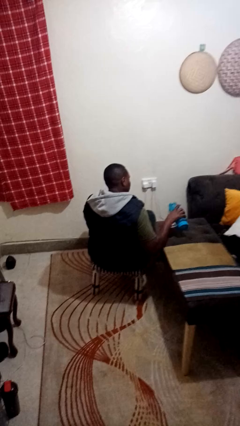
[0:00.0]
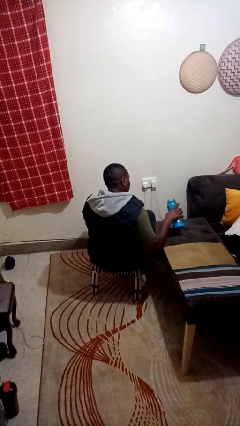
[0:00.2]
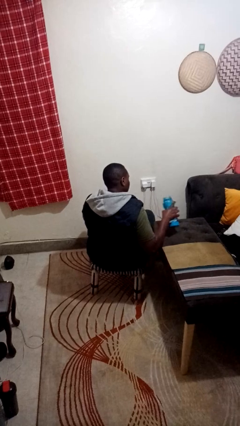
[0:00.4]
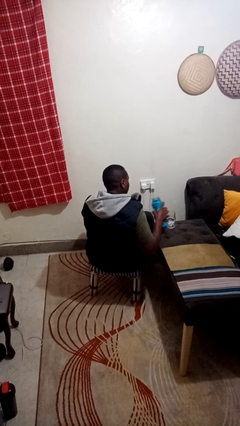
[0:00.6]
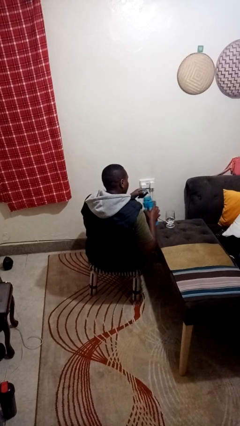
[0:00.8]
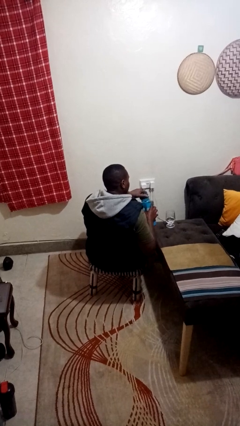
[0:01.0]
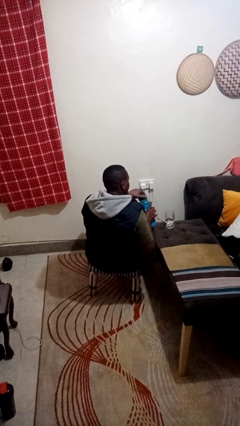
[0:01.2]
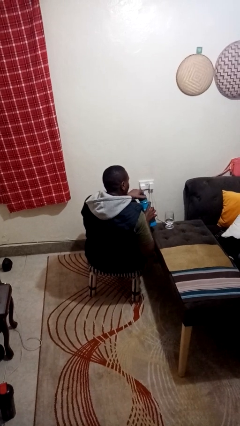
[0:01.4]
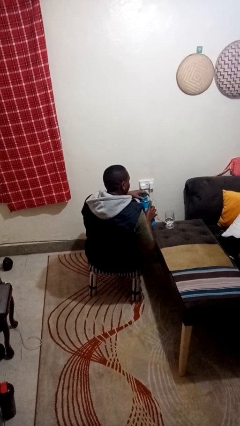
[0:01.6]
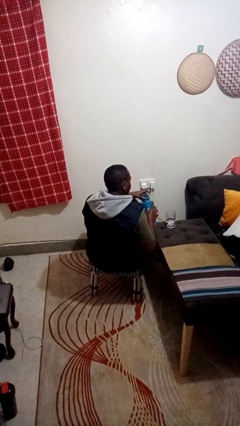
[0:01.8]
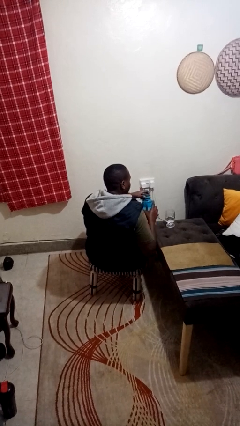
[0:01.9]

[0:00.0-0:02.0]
person screws lid to bottle

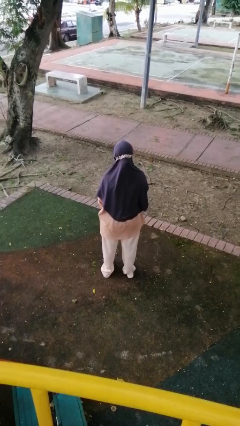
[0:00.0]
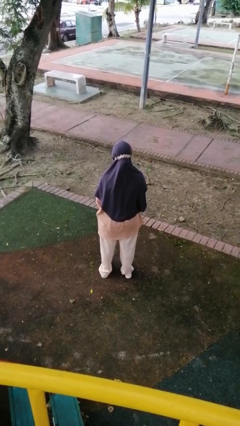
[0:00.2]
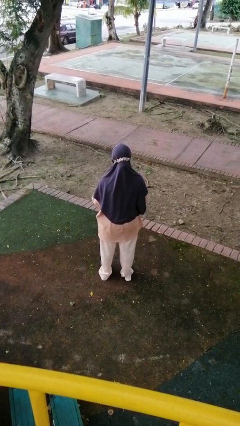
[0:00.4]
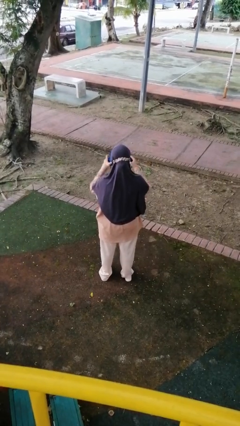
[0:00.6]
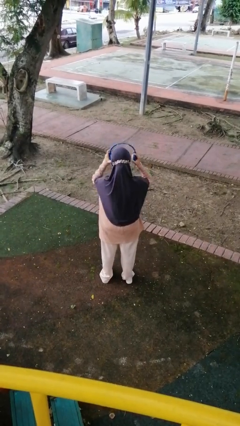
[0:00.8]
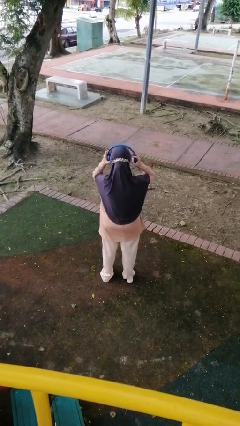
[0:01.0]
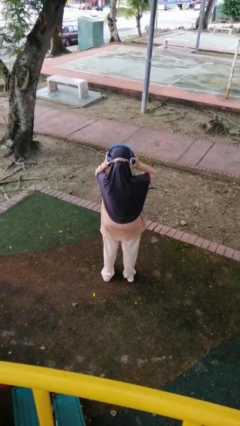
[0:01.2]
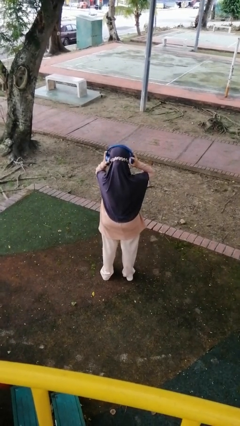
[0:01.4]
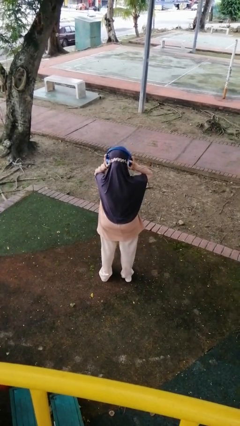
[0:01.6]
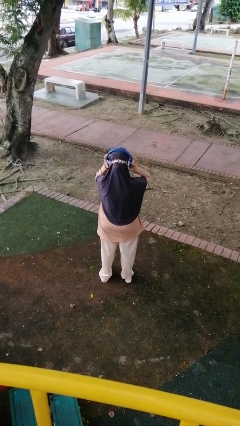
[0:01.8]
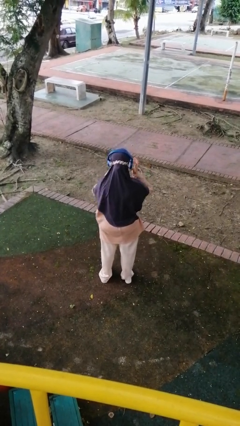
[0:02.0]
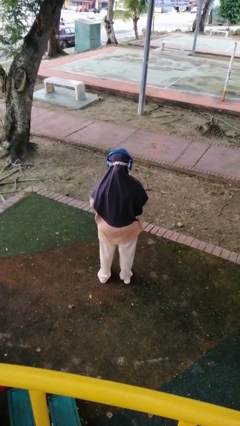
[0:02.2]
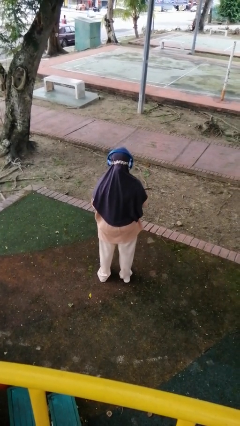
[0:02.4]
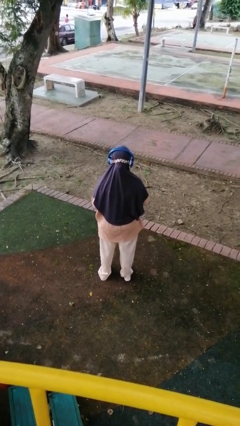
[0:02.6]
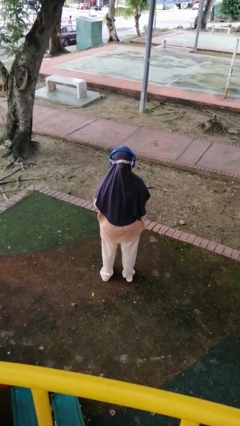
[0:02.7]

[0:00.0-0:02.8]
person puts on headphones

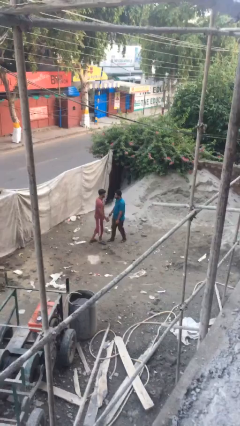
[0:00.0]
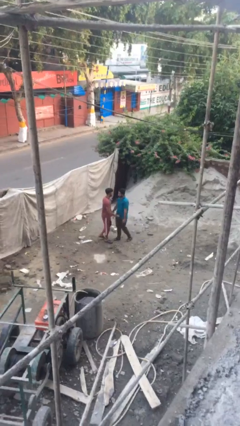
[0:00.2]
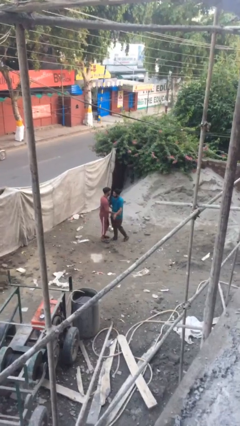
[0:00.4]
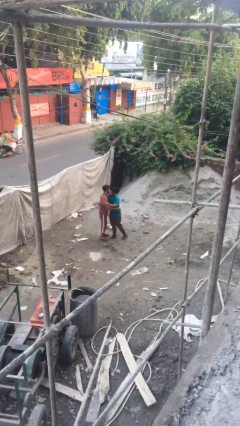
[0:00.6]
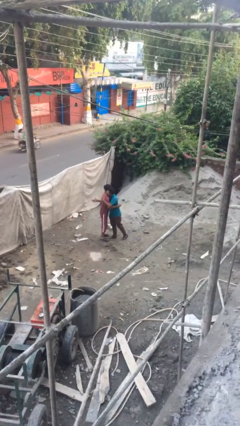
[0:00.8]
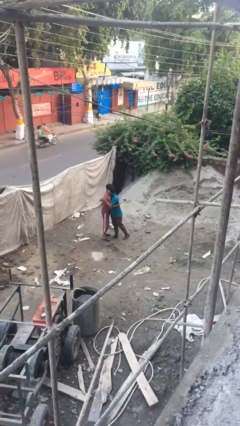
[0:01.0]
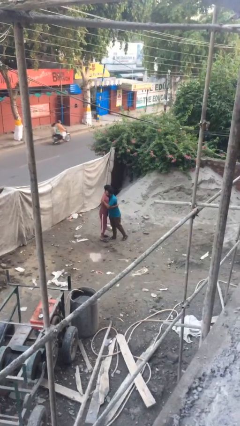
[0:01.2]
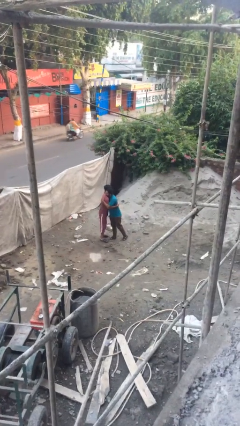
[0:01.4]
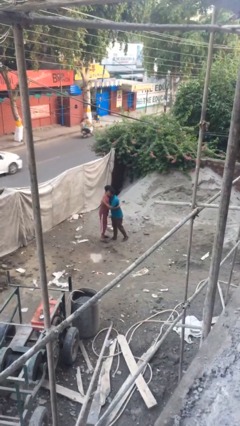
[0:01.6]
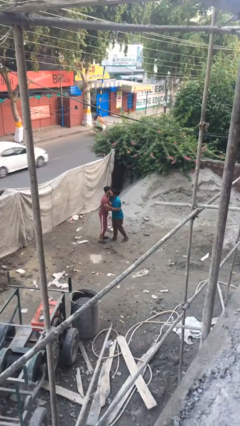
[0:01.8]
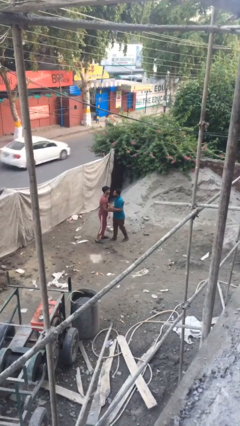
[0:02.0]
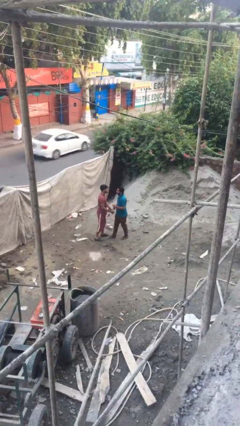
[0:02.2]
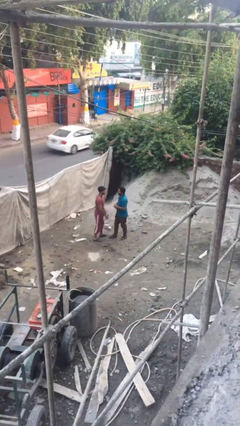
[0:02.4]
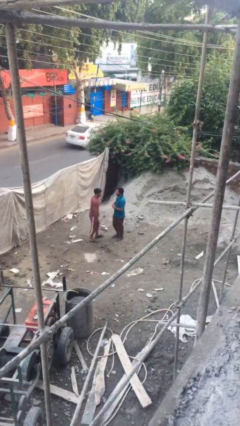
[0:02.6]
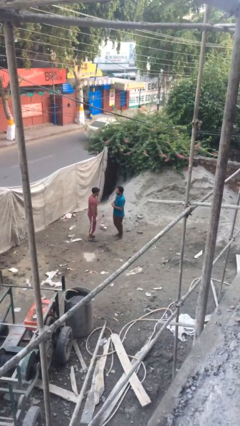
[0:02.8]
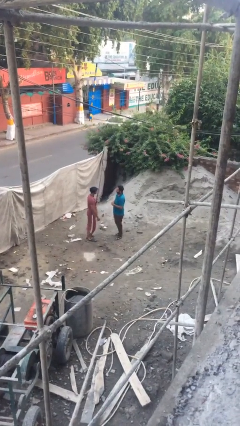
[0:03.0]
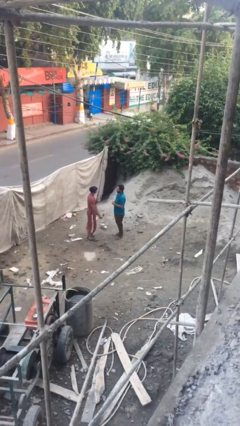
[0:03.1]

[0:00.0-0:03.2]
person embraces person

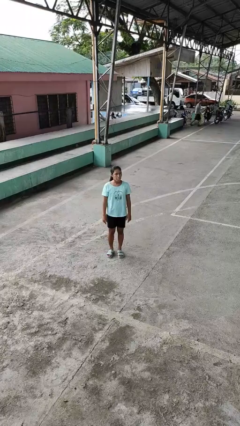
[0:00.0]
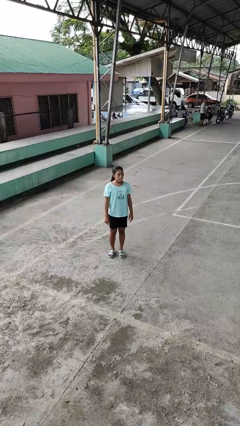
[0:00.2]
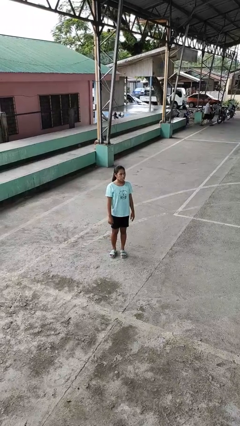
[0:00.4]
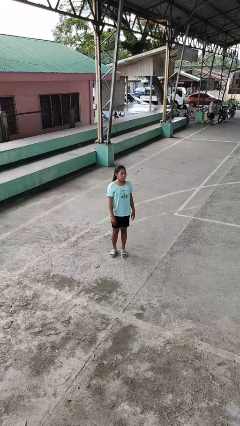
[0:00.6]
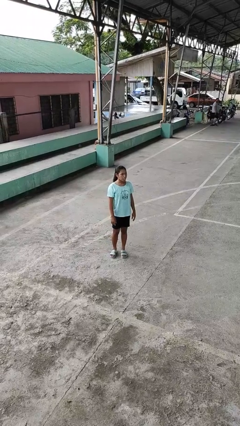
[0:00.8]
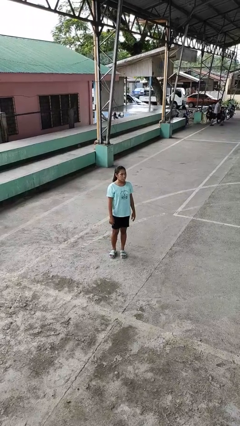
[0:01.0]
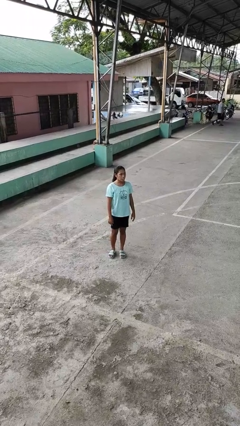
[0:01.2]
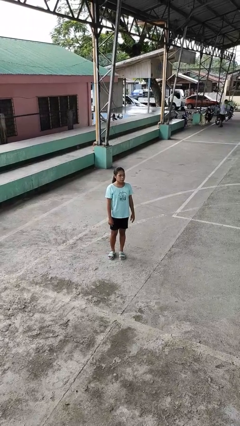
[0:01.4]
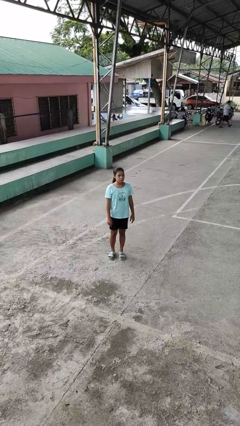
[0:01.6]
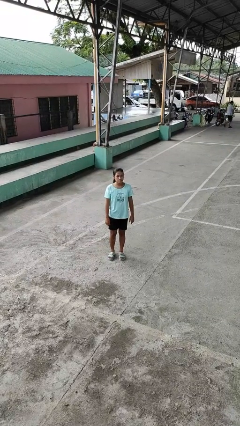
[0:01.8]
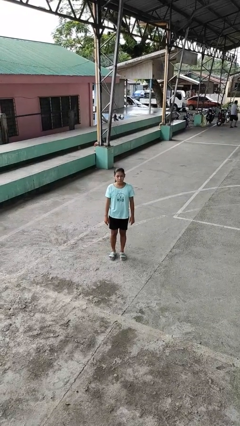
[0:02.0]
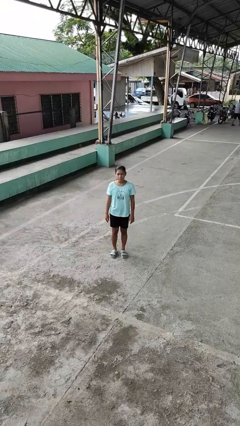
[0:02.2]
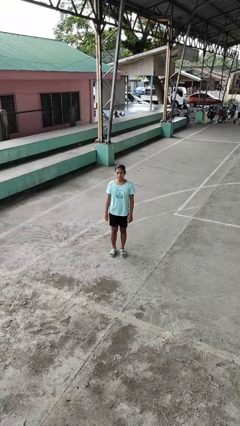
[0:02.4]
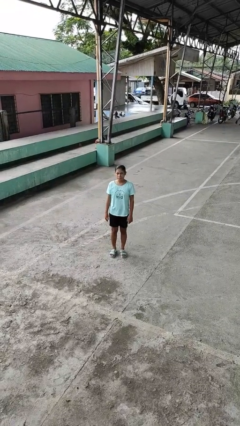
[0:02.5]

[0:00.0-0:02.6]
person sticks out tongue

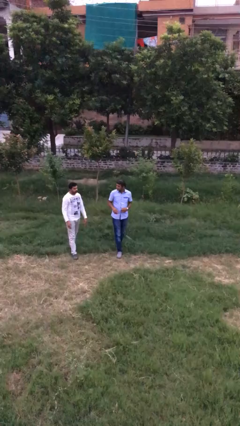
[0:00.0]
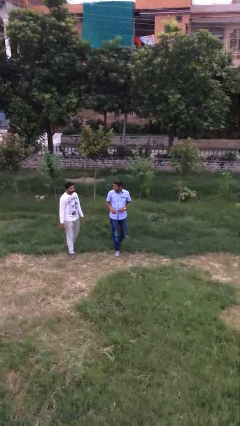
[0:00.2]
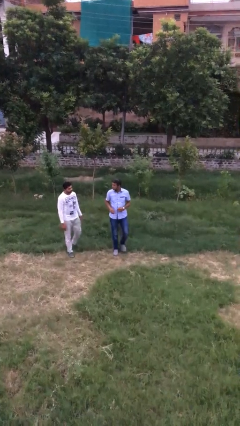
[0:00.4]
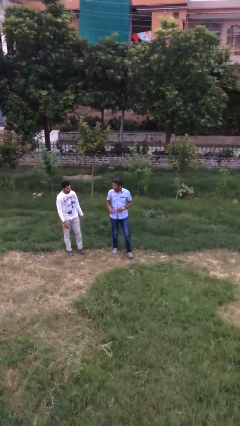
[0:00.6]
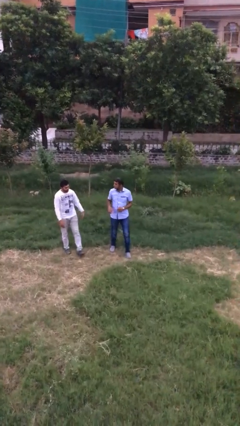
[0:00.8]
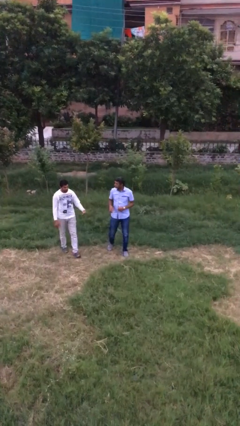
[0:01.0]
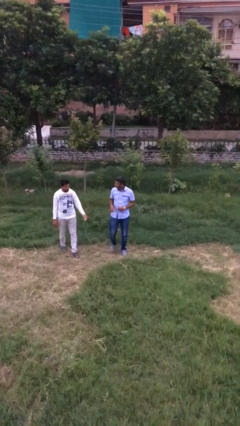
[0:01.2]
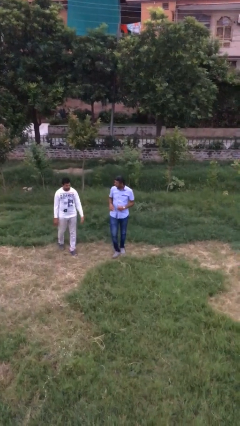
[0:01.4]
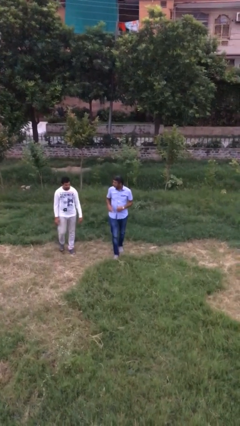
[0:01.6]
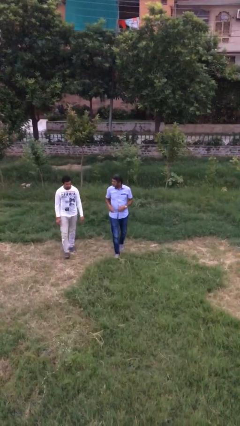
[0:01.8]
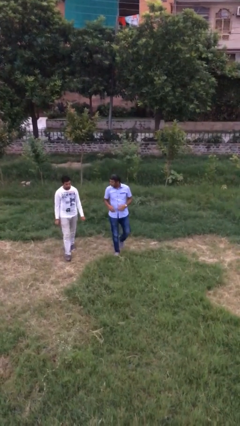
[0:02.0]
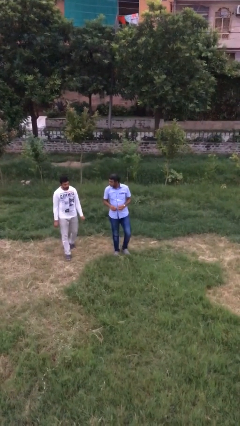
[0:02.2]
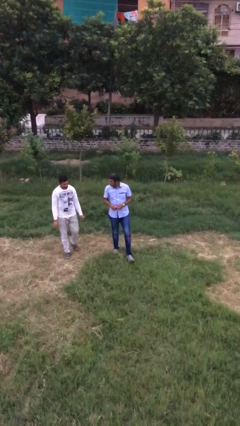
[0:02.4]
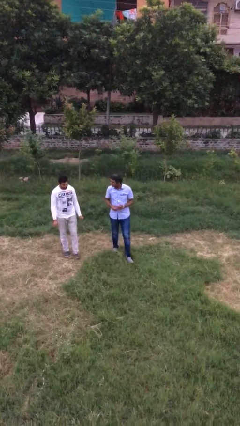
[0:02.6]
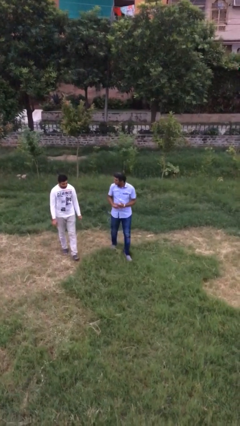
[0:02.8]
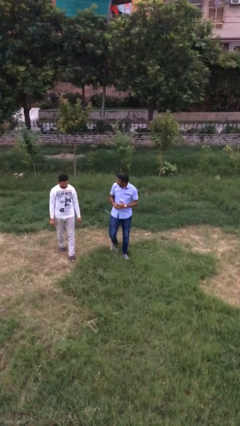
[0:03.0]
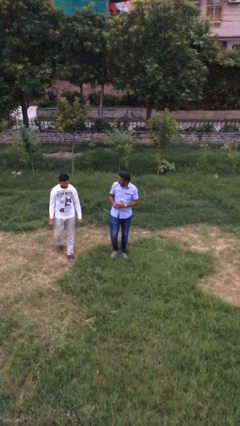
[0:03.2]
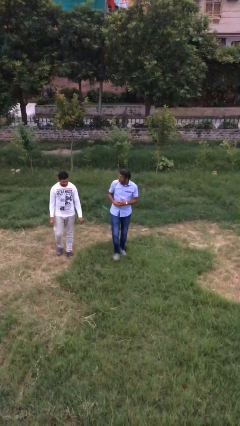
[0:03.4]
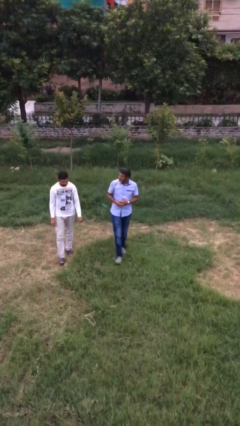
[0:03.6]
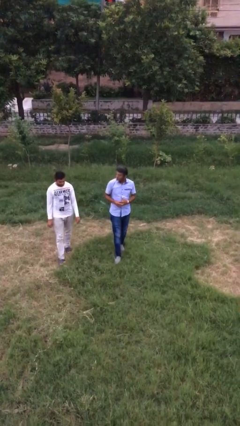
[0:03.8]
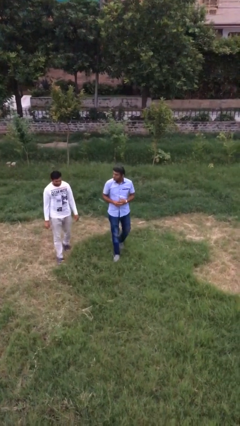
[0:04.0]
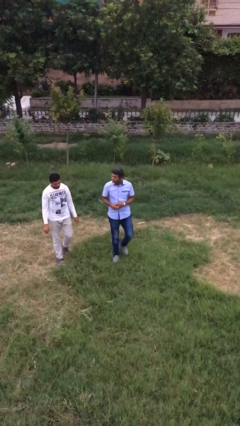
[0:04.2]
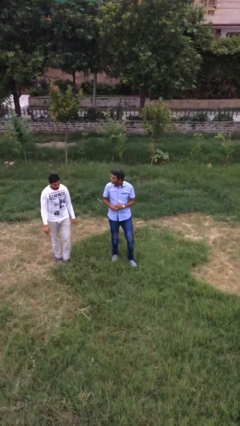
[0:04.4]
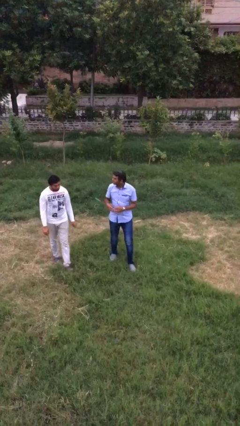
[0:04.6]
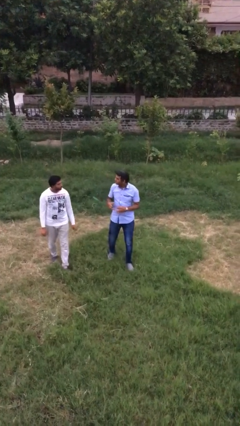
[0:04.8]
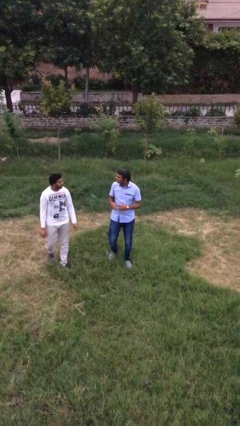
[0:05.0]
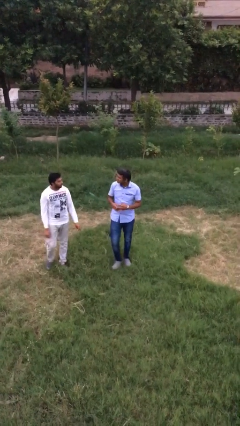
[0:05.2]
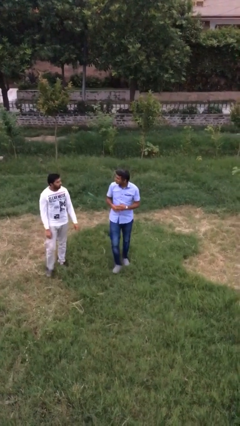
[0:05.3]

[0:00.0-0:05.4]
person talks to person

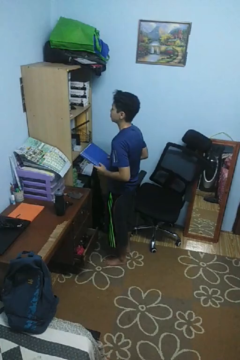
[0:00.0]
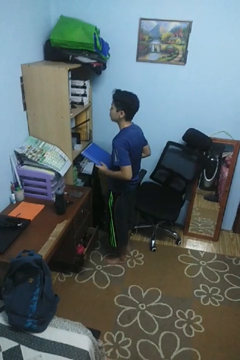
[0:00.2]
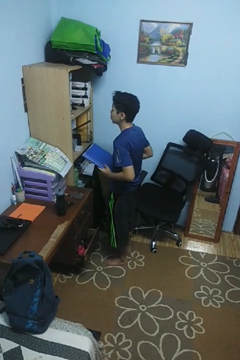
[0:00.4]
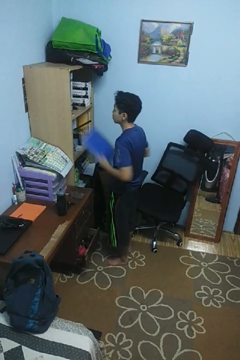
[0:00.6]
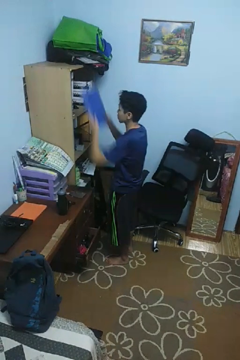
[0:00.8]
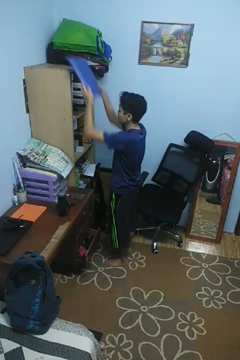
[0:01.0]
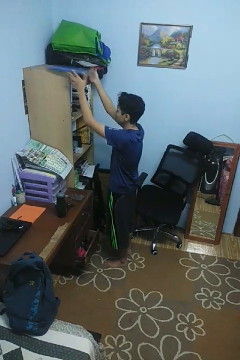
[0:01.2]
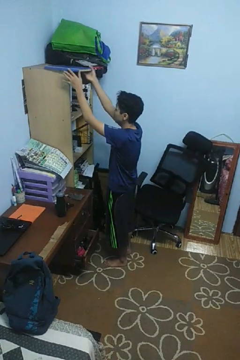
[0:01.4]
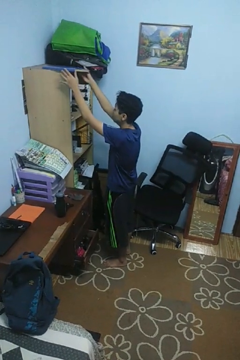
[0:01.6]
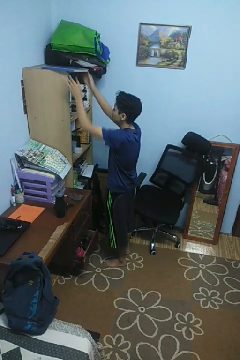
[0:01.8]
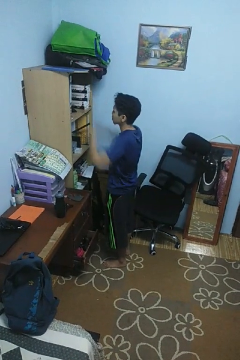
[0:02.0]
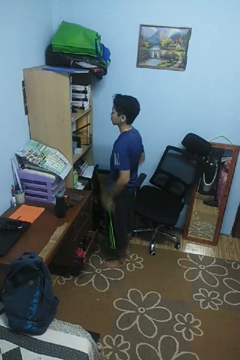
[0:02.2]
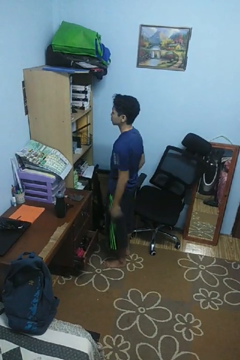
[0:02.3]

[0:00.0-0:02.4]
person puts down object on shelf
